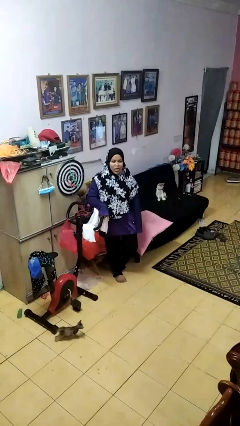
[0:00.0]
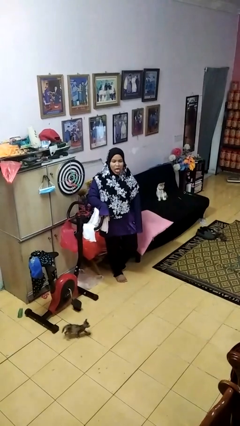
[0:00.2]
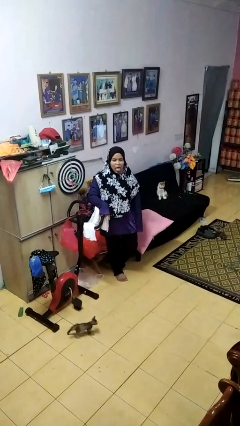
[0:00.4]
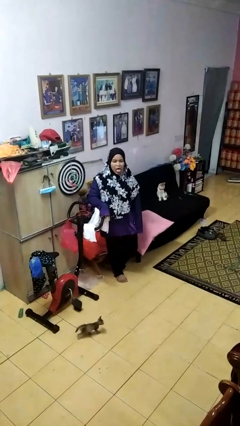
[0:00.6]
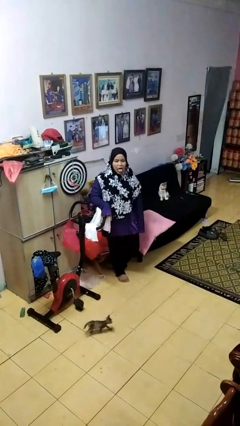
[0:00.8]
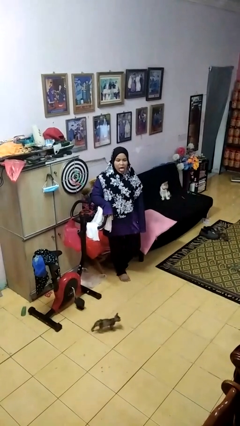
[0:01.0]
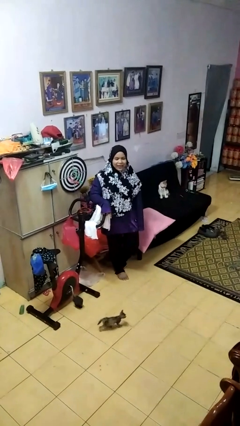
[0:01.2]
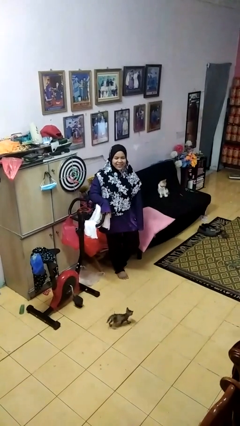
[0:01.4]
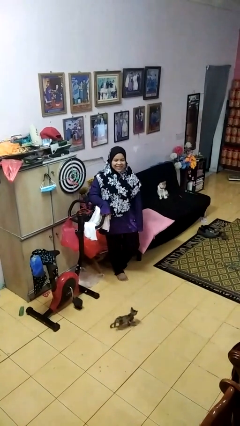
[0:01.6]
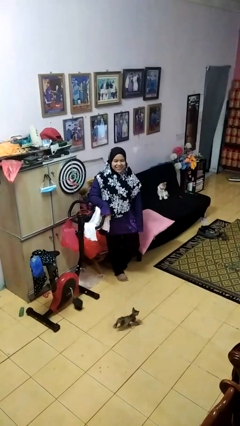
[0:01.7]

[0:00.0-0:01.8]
person sticks out tongue

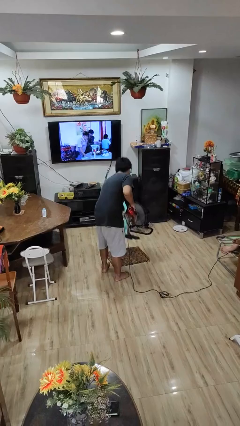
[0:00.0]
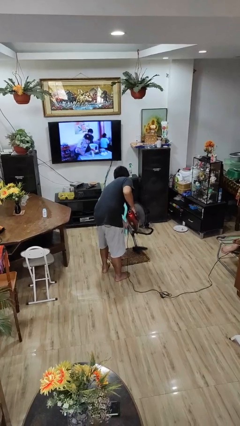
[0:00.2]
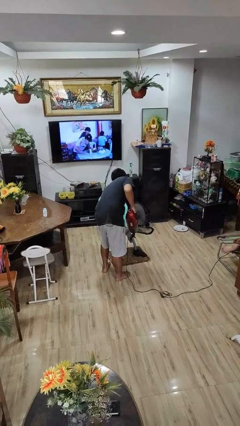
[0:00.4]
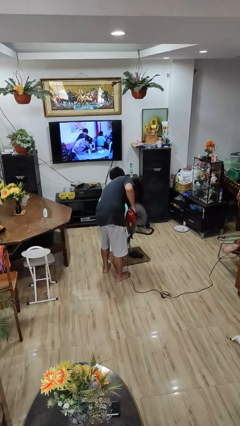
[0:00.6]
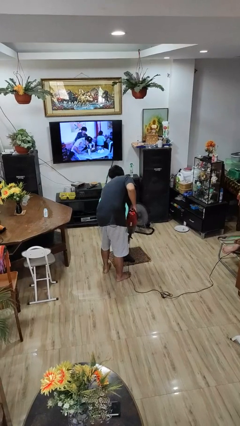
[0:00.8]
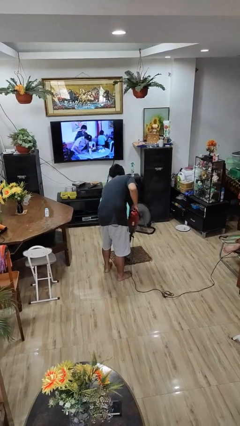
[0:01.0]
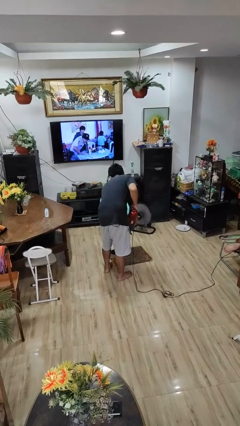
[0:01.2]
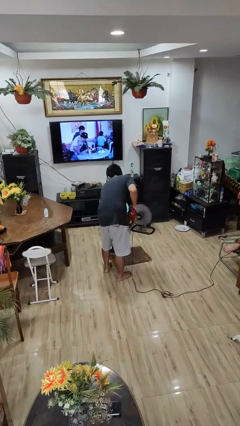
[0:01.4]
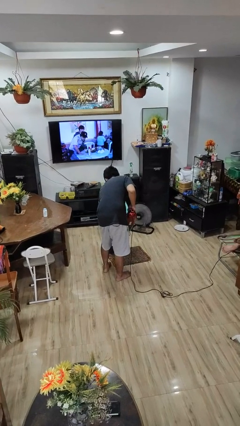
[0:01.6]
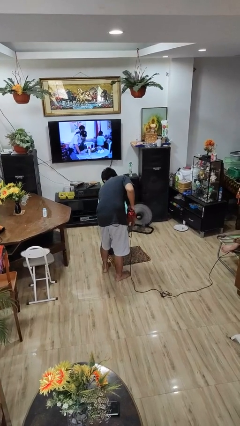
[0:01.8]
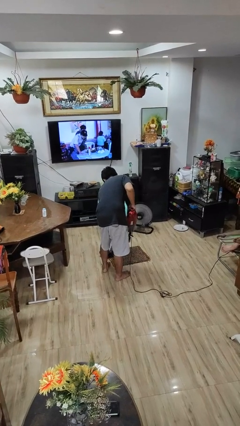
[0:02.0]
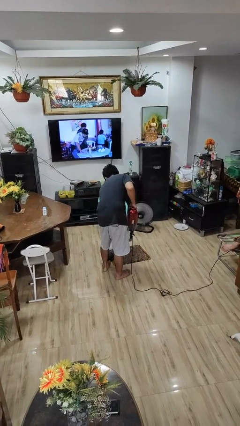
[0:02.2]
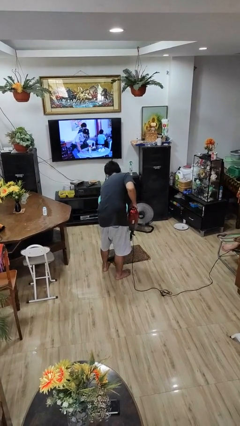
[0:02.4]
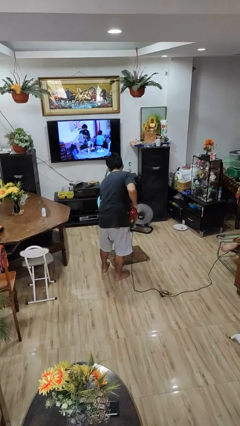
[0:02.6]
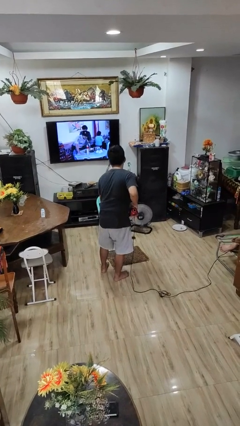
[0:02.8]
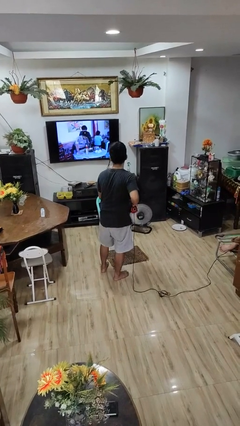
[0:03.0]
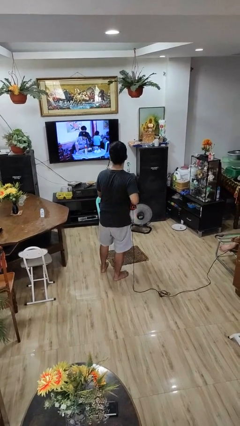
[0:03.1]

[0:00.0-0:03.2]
person vacuums carpet

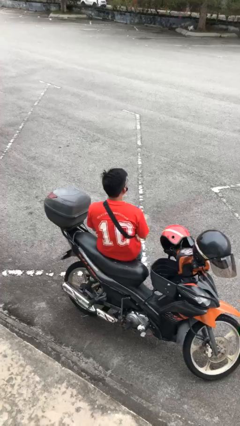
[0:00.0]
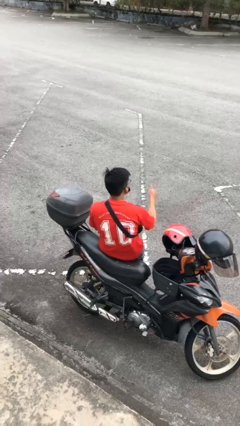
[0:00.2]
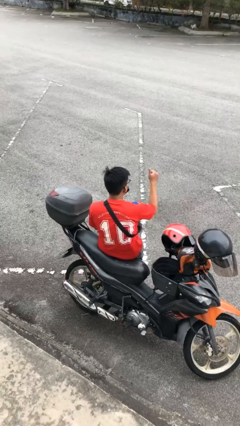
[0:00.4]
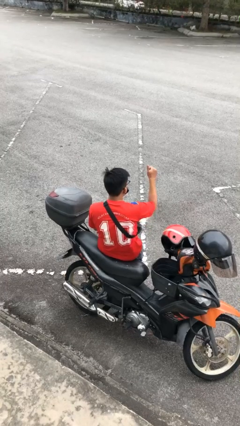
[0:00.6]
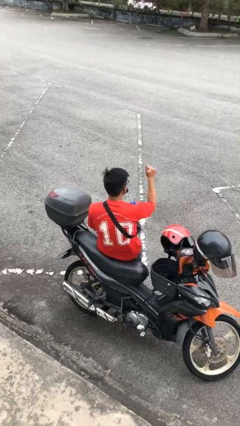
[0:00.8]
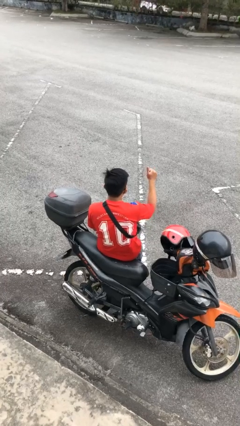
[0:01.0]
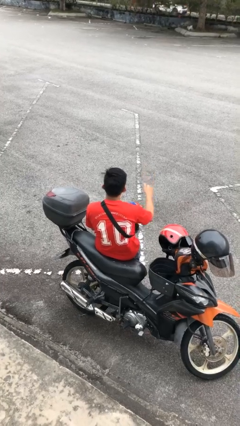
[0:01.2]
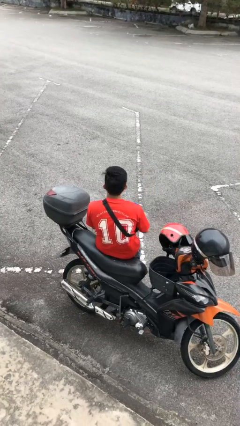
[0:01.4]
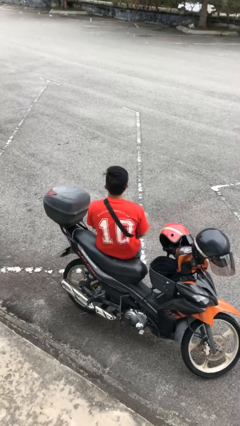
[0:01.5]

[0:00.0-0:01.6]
person gestures thumbs up

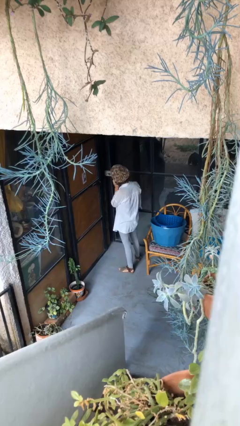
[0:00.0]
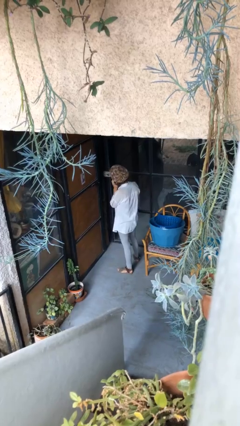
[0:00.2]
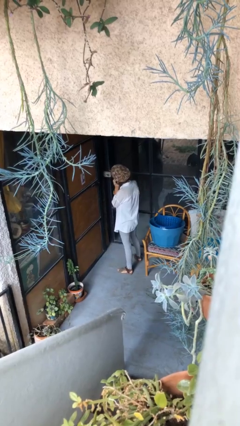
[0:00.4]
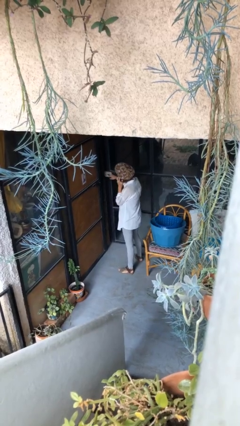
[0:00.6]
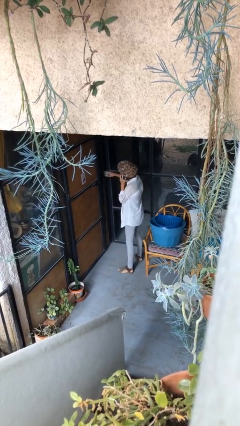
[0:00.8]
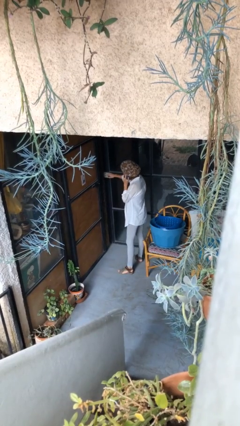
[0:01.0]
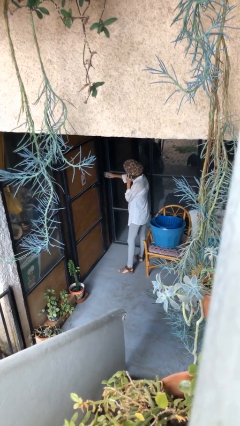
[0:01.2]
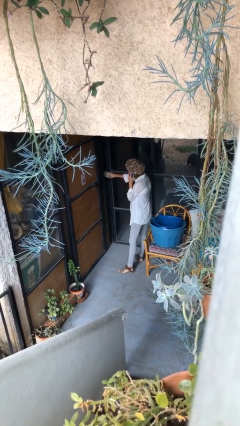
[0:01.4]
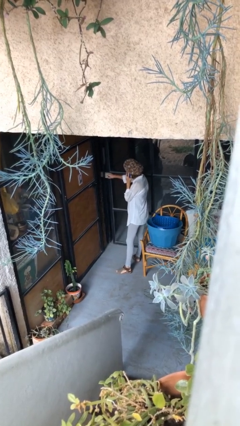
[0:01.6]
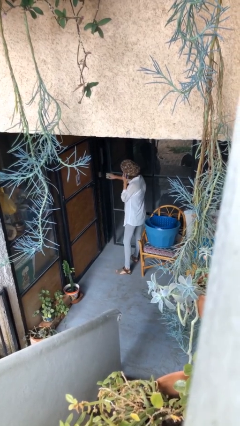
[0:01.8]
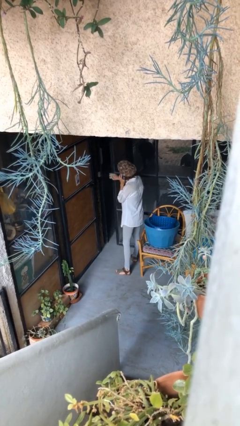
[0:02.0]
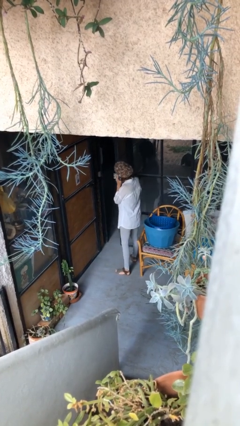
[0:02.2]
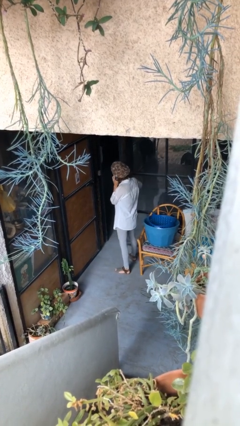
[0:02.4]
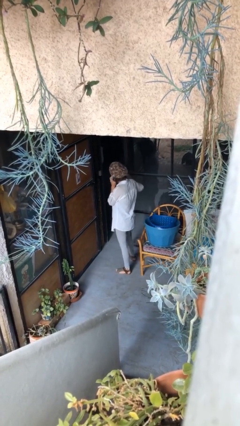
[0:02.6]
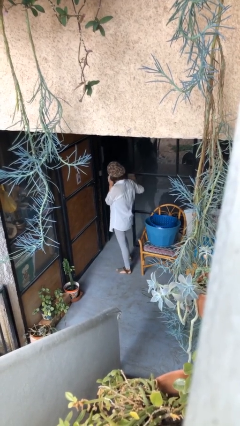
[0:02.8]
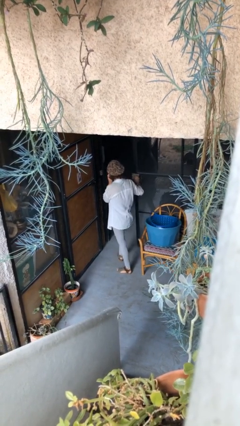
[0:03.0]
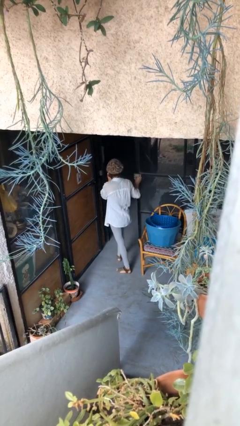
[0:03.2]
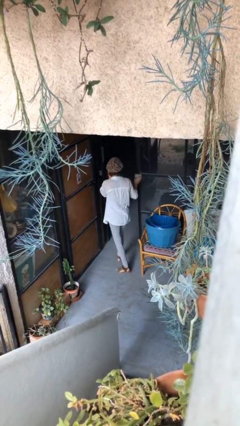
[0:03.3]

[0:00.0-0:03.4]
person opens facility door

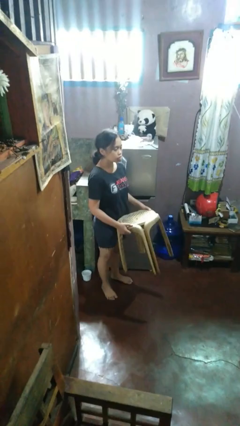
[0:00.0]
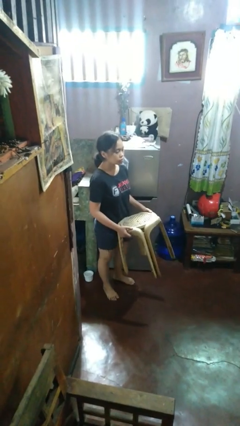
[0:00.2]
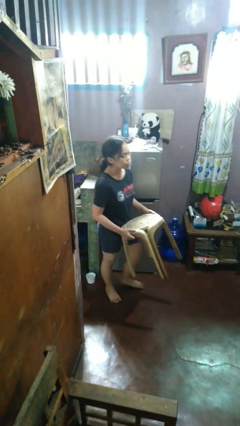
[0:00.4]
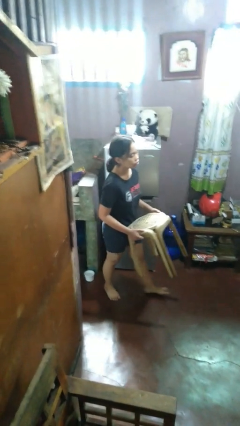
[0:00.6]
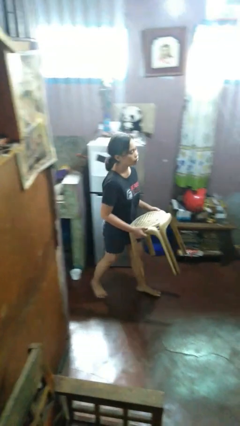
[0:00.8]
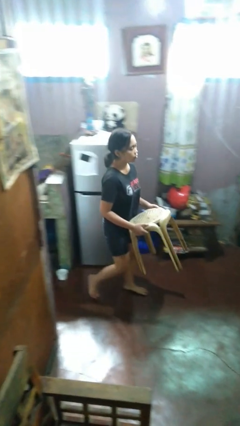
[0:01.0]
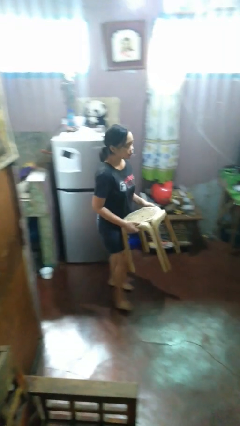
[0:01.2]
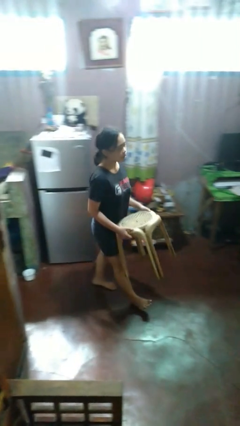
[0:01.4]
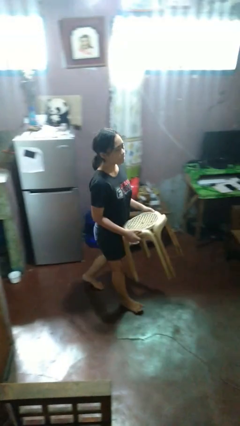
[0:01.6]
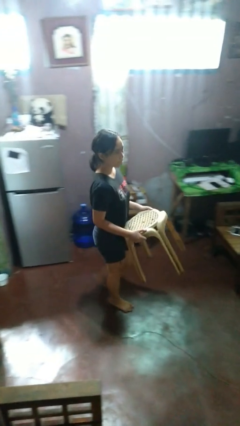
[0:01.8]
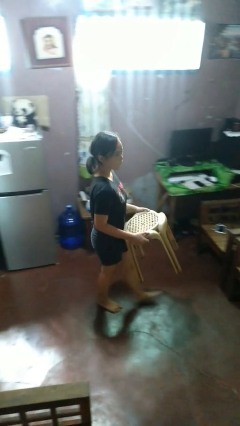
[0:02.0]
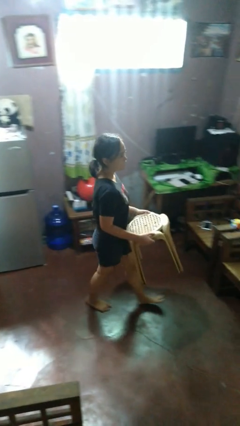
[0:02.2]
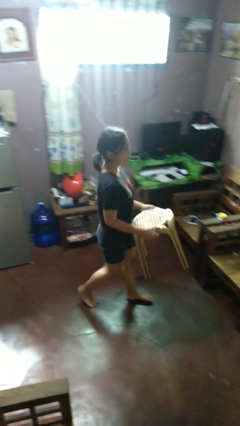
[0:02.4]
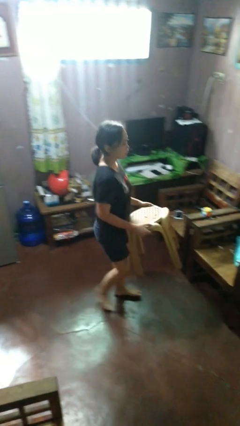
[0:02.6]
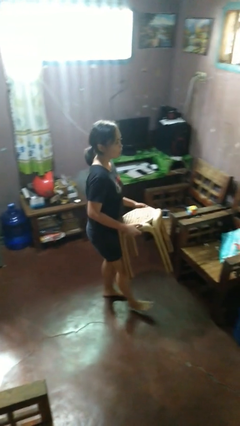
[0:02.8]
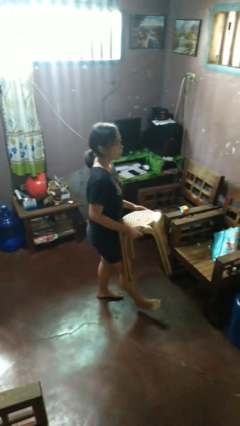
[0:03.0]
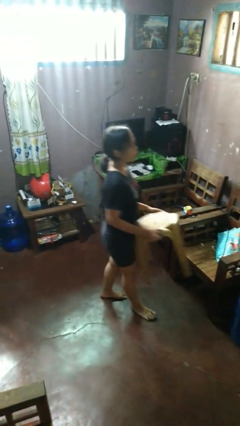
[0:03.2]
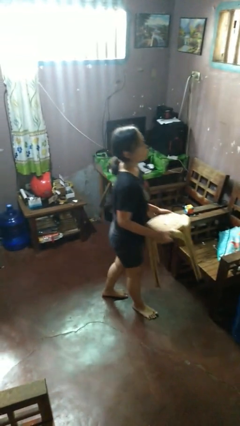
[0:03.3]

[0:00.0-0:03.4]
person carries furniture

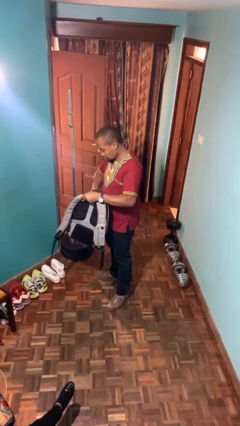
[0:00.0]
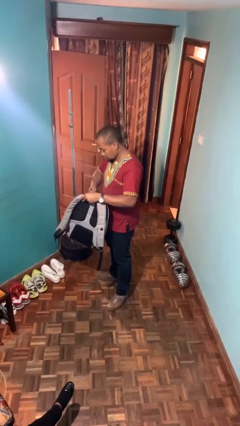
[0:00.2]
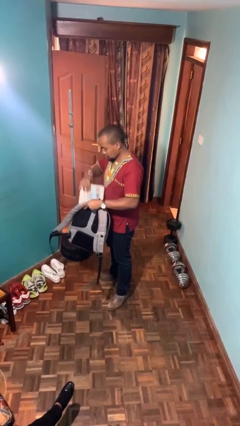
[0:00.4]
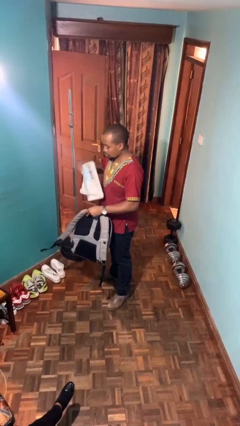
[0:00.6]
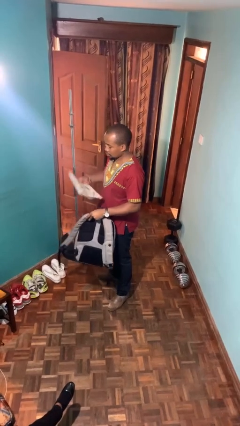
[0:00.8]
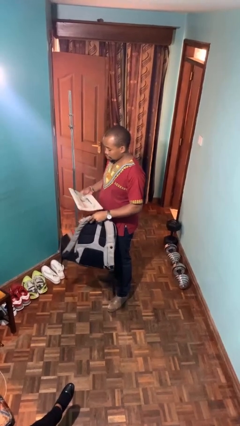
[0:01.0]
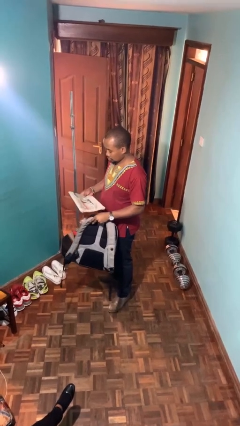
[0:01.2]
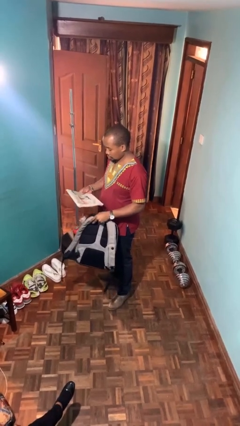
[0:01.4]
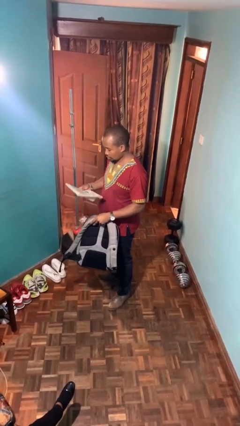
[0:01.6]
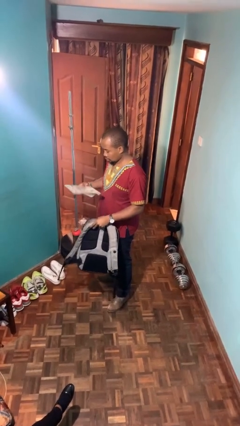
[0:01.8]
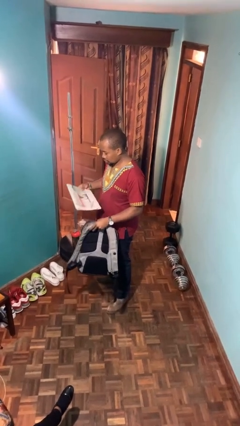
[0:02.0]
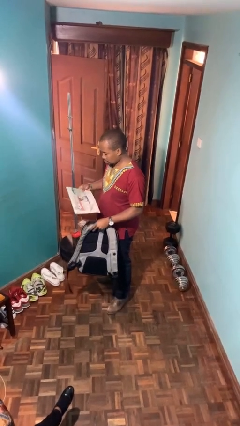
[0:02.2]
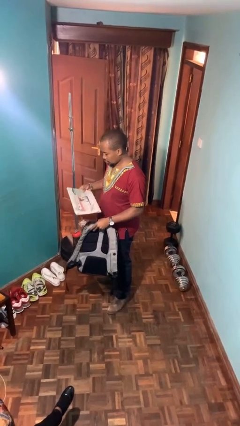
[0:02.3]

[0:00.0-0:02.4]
person takes object from backpack

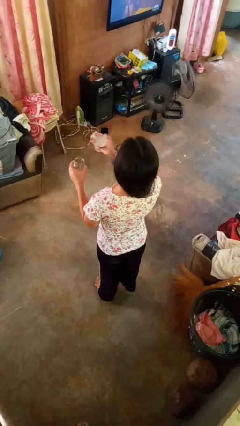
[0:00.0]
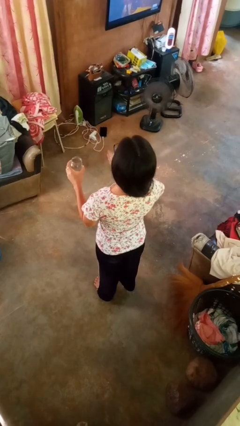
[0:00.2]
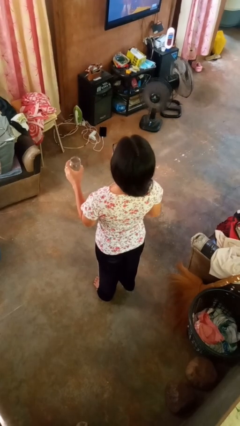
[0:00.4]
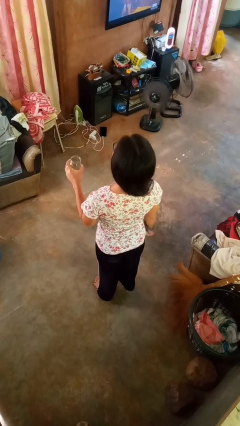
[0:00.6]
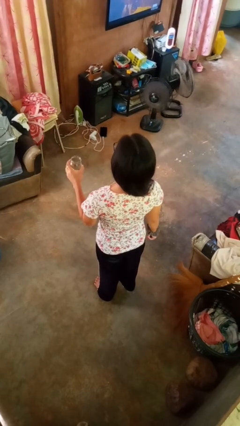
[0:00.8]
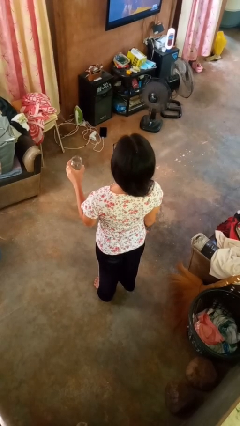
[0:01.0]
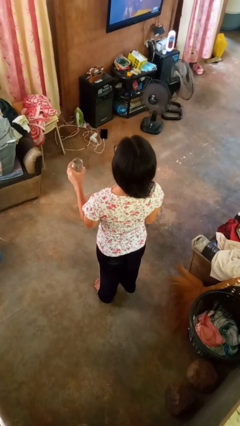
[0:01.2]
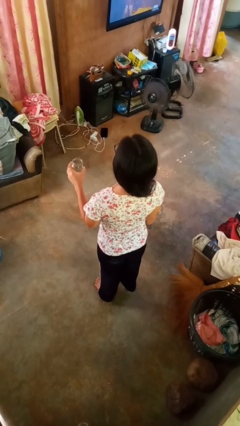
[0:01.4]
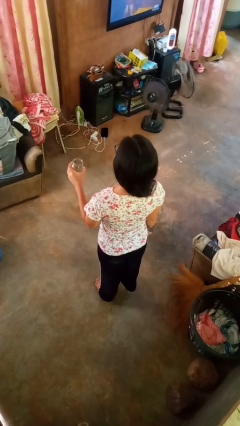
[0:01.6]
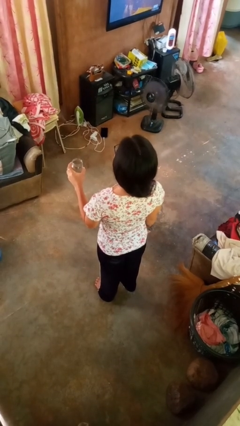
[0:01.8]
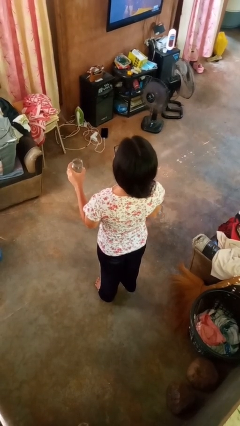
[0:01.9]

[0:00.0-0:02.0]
person opens jar
